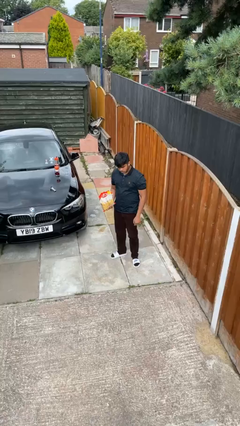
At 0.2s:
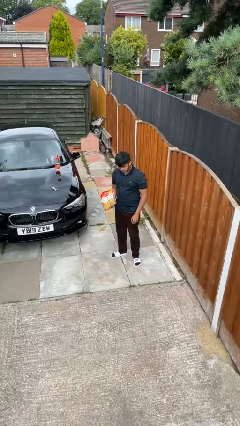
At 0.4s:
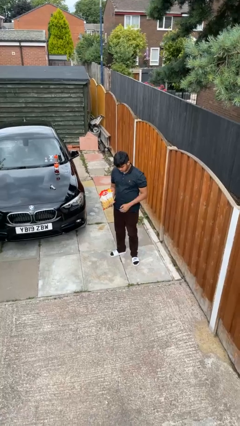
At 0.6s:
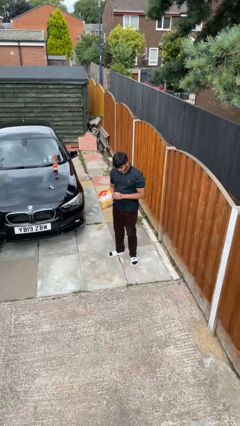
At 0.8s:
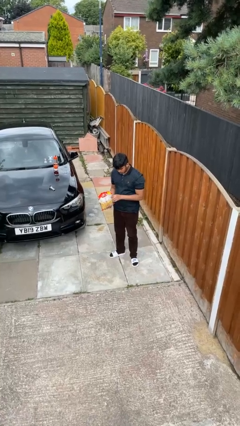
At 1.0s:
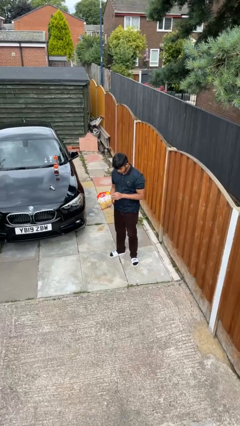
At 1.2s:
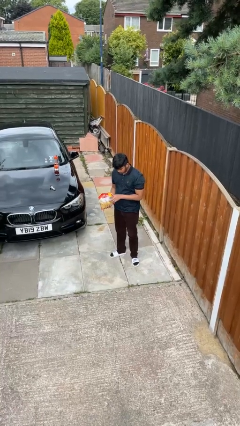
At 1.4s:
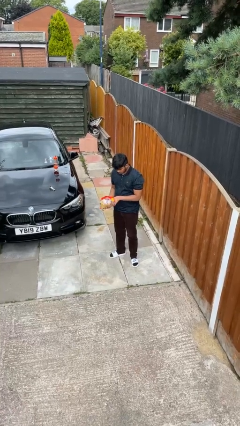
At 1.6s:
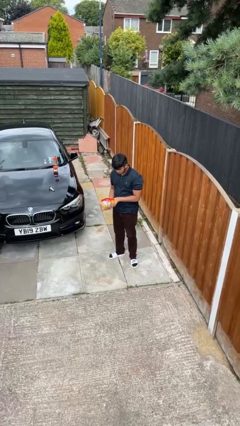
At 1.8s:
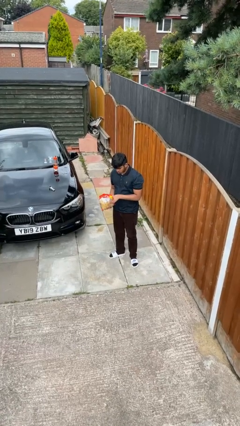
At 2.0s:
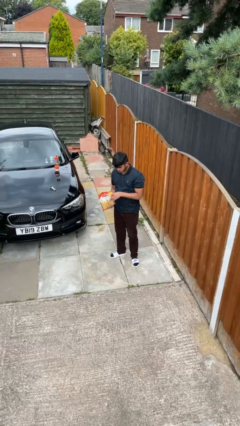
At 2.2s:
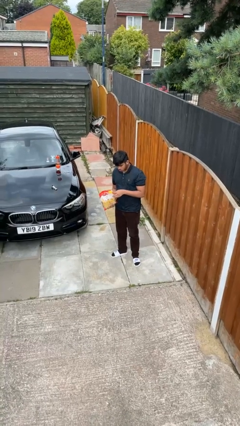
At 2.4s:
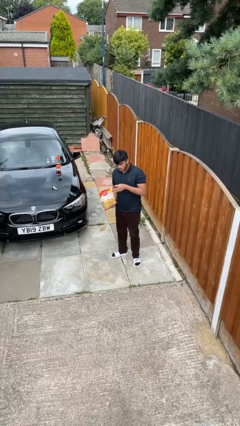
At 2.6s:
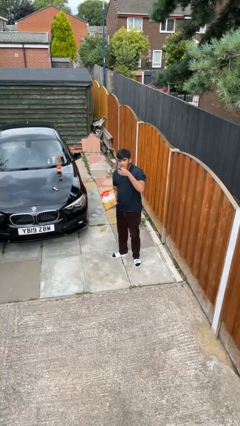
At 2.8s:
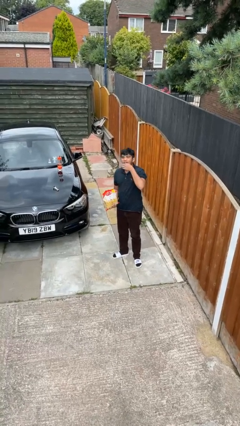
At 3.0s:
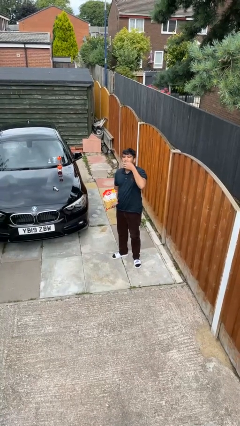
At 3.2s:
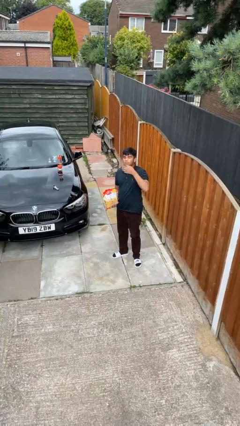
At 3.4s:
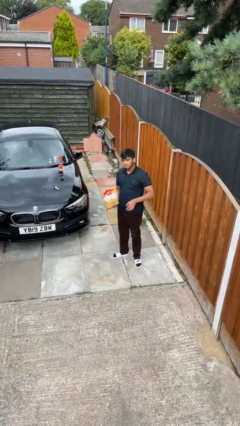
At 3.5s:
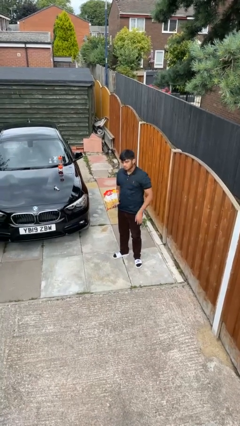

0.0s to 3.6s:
person eats snack from bag

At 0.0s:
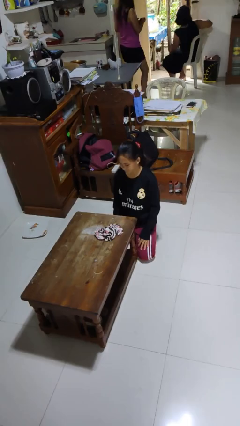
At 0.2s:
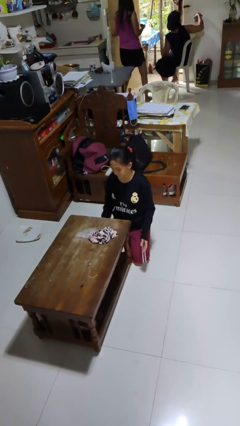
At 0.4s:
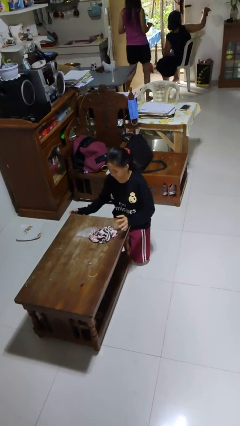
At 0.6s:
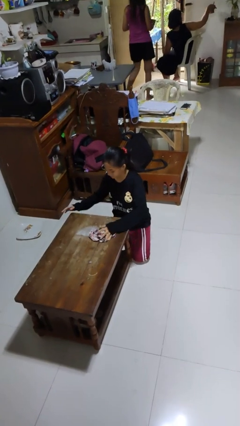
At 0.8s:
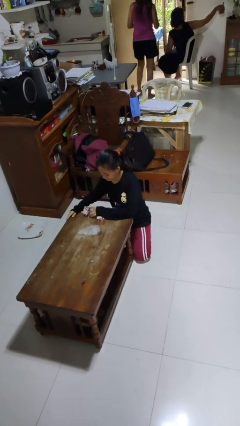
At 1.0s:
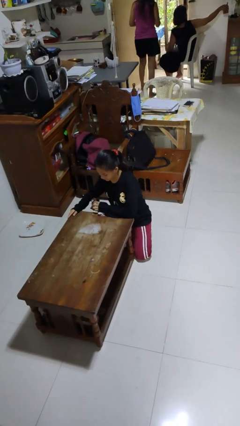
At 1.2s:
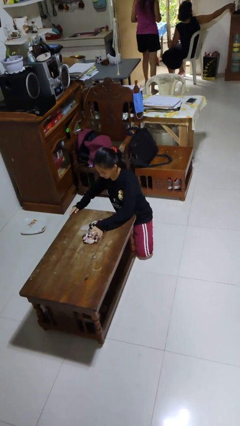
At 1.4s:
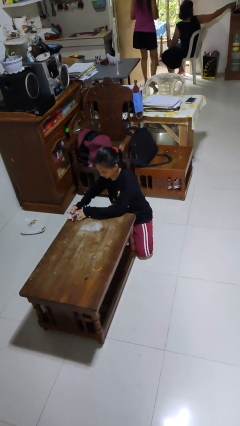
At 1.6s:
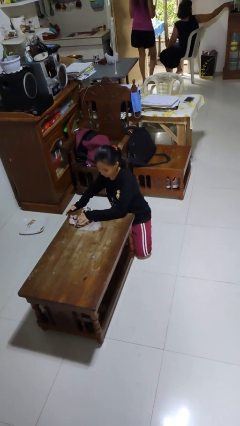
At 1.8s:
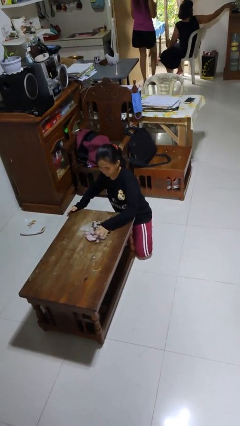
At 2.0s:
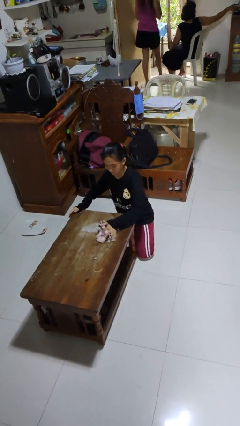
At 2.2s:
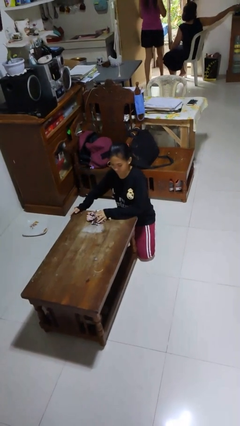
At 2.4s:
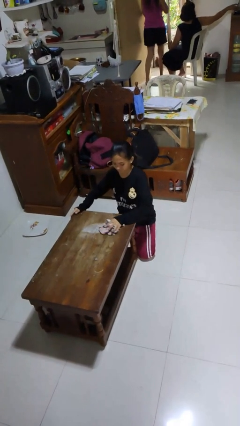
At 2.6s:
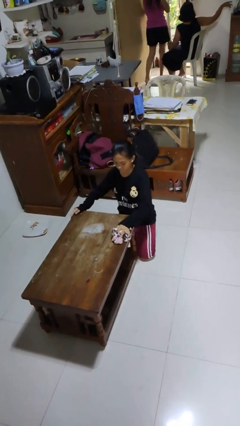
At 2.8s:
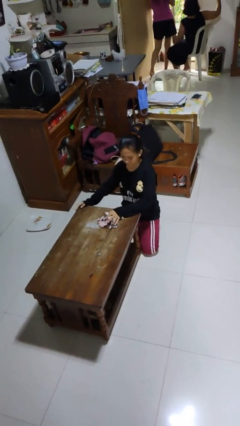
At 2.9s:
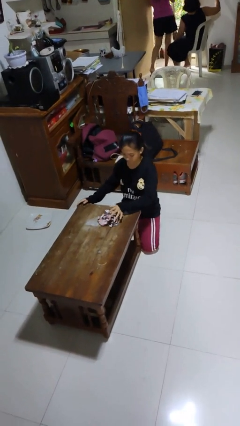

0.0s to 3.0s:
person cleans table with rag

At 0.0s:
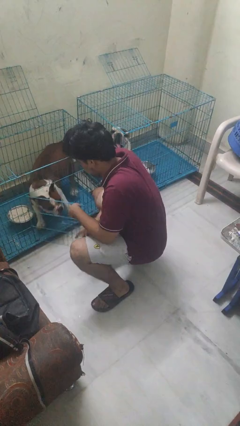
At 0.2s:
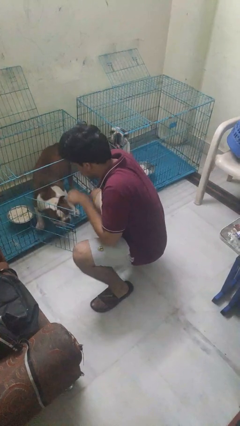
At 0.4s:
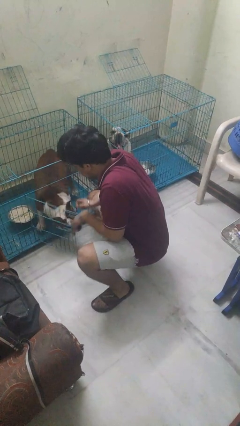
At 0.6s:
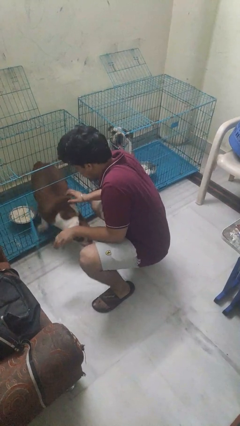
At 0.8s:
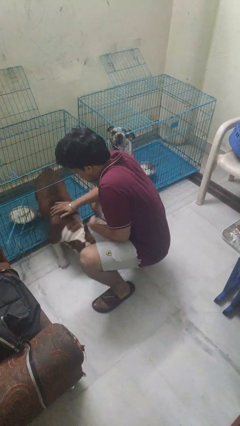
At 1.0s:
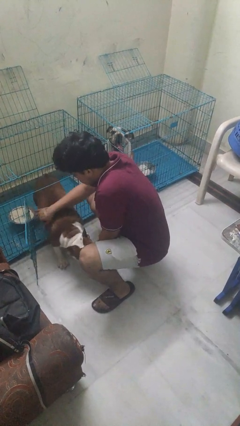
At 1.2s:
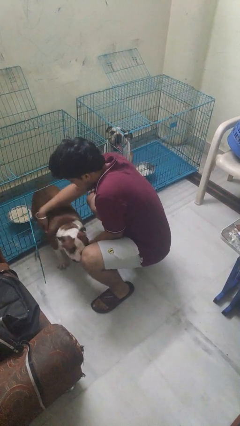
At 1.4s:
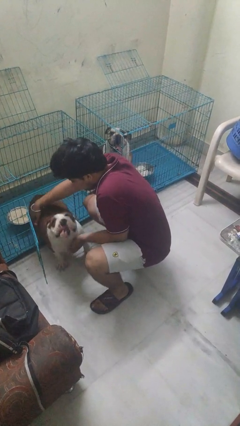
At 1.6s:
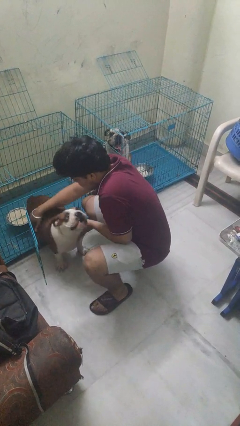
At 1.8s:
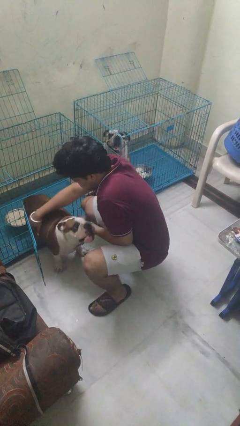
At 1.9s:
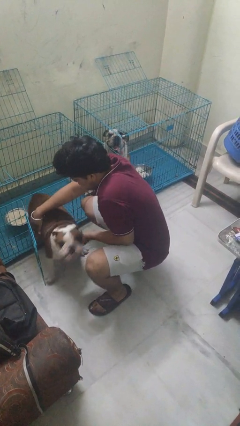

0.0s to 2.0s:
person uncrates dog

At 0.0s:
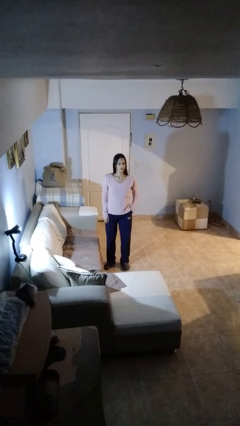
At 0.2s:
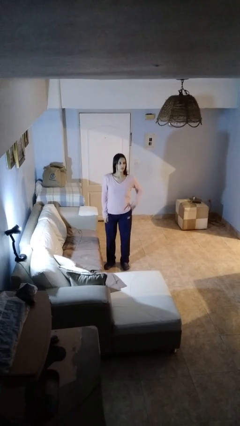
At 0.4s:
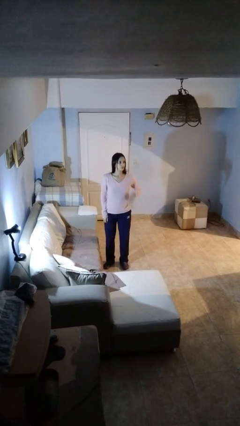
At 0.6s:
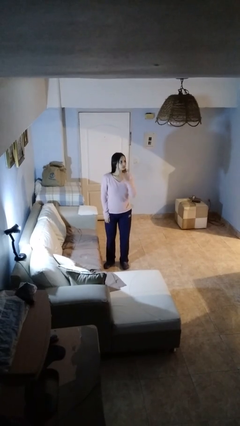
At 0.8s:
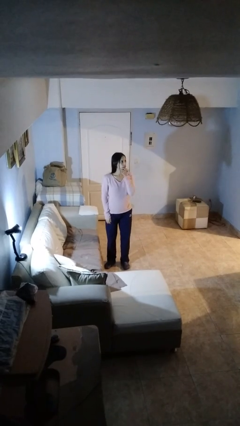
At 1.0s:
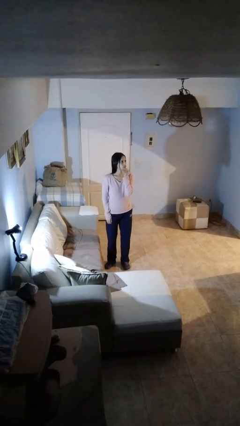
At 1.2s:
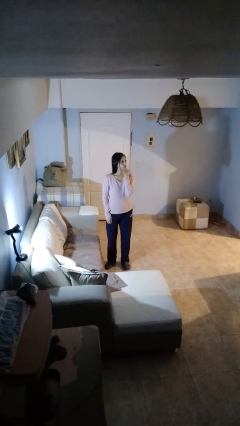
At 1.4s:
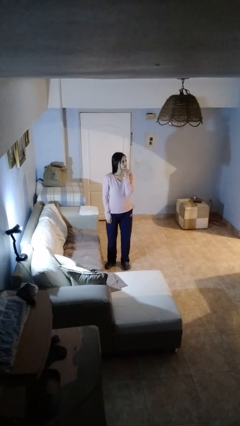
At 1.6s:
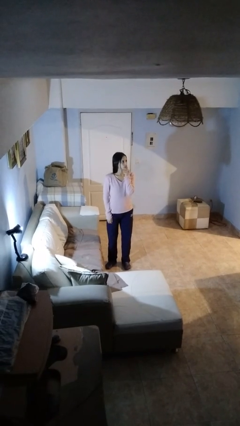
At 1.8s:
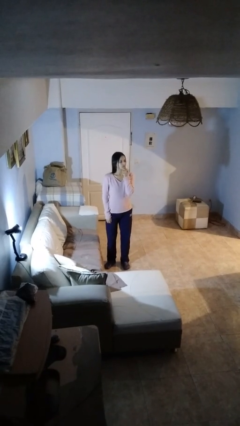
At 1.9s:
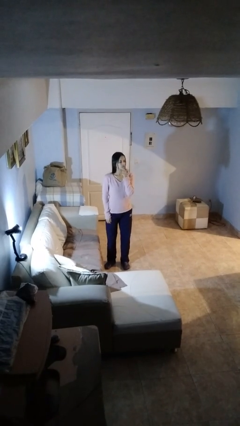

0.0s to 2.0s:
person strokes chin

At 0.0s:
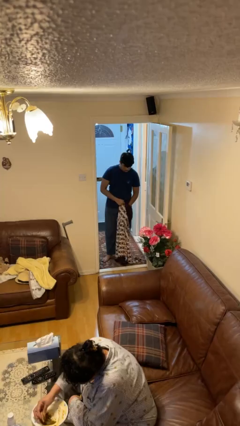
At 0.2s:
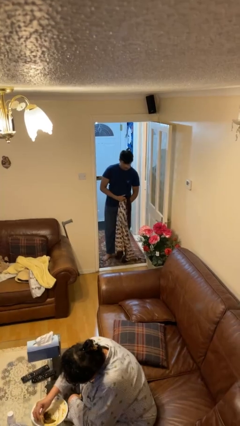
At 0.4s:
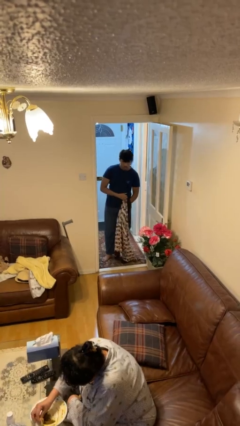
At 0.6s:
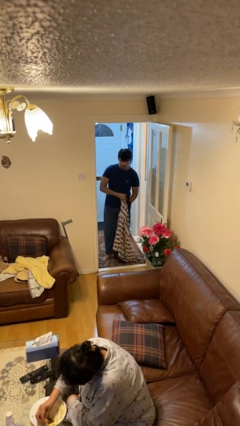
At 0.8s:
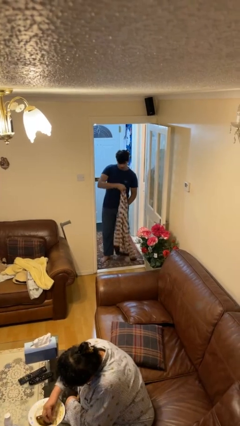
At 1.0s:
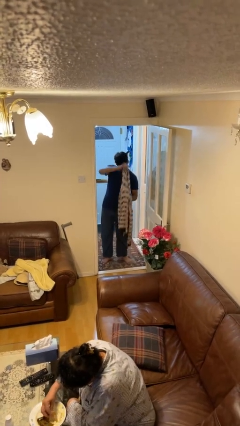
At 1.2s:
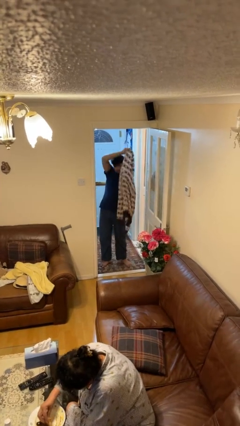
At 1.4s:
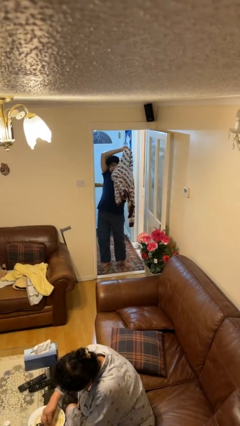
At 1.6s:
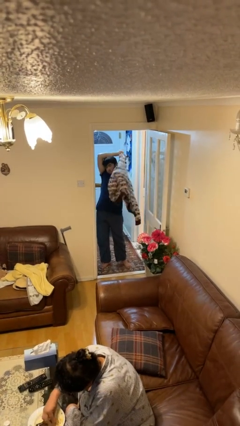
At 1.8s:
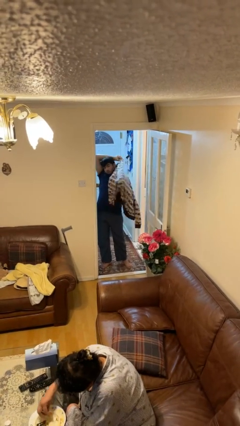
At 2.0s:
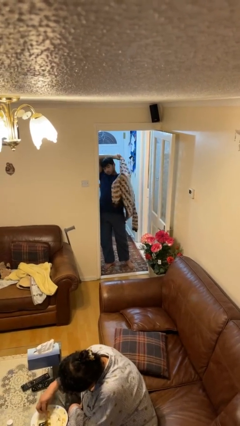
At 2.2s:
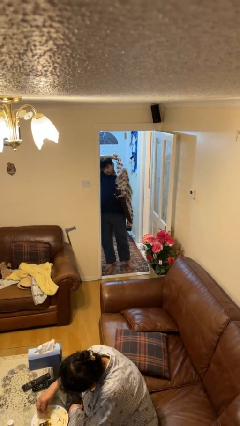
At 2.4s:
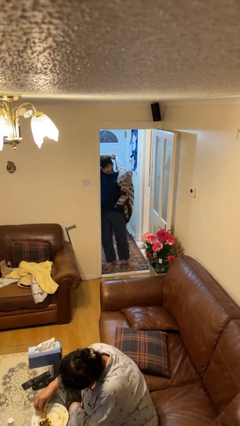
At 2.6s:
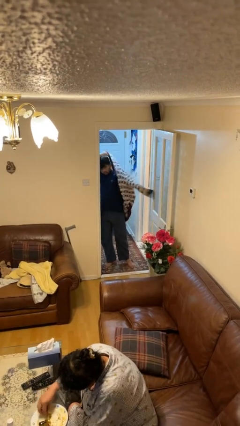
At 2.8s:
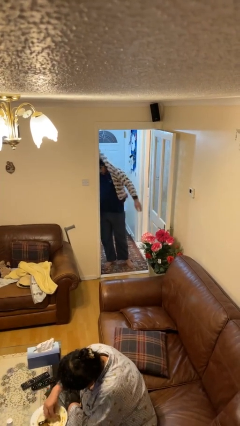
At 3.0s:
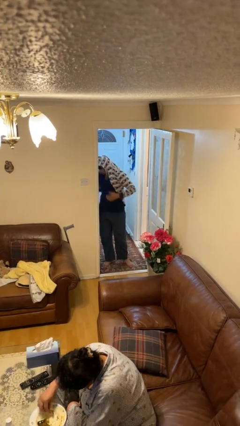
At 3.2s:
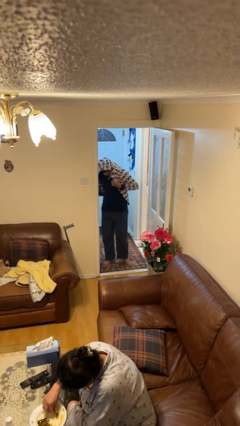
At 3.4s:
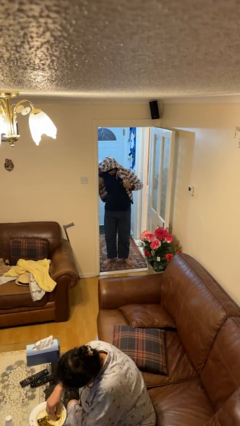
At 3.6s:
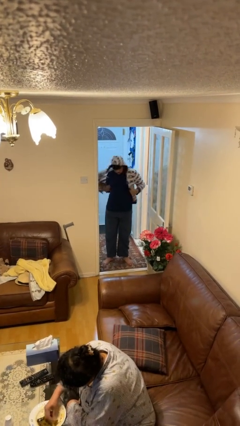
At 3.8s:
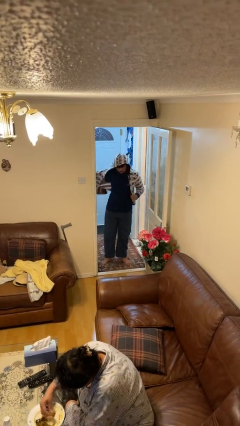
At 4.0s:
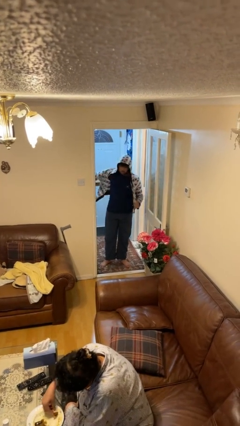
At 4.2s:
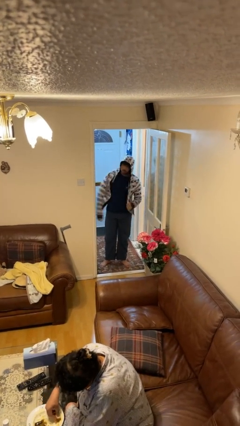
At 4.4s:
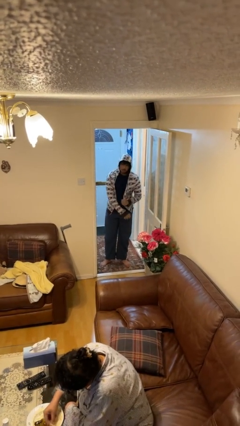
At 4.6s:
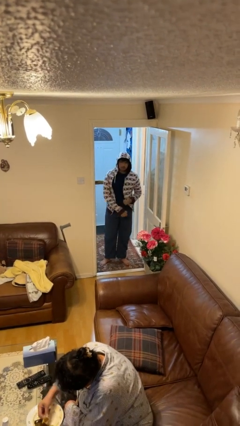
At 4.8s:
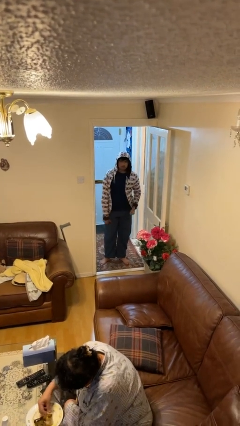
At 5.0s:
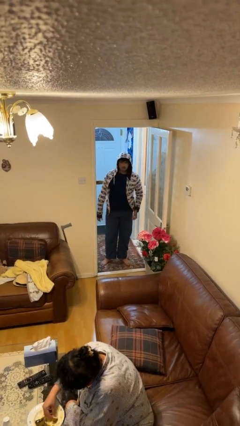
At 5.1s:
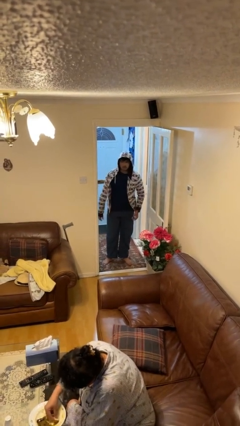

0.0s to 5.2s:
person puts on hoodie

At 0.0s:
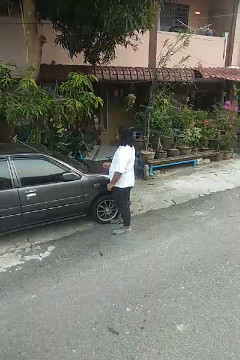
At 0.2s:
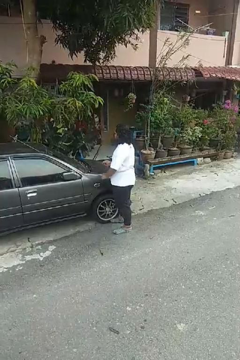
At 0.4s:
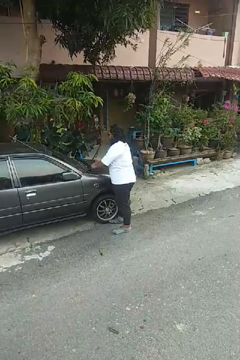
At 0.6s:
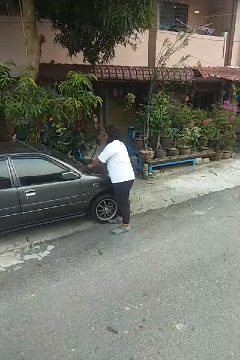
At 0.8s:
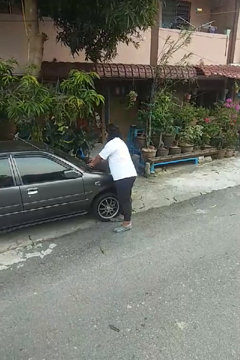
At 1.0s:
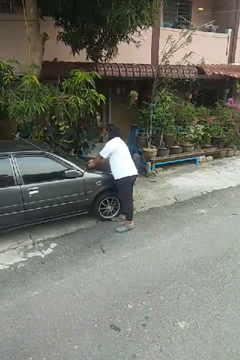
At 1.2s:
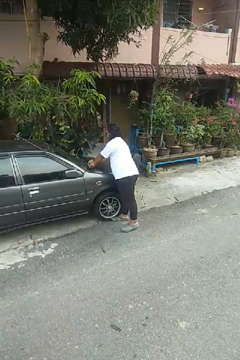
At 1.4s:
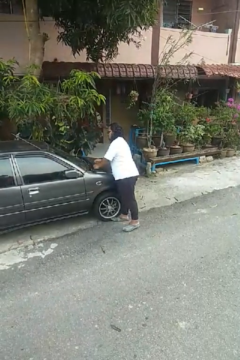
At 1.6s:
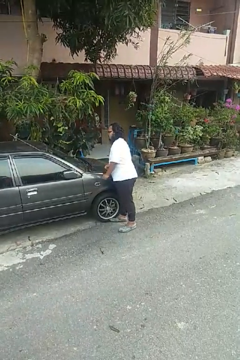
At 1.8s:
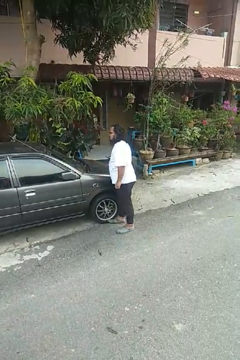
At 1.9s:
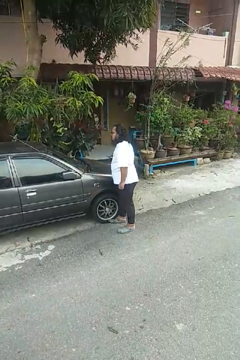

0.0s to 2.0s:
person flips down car wipers
